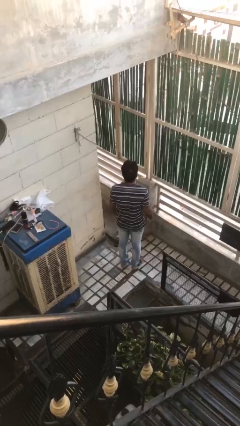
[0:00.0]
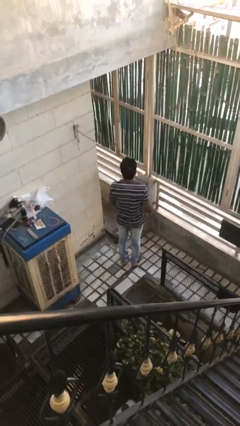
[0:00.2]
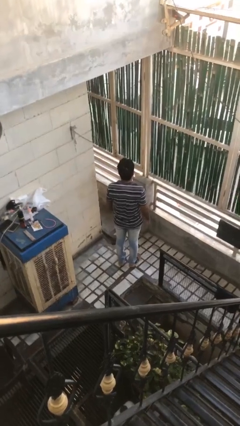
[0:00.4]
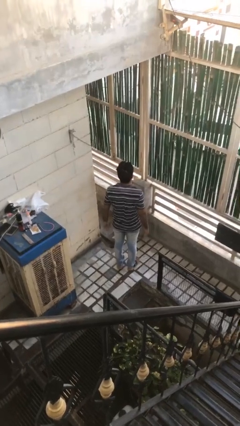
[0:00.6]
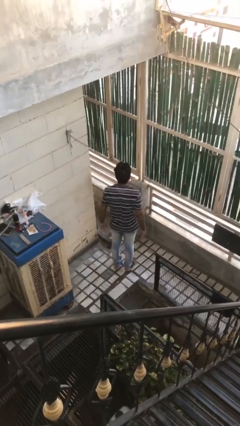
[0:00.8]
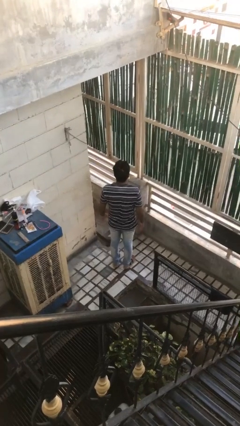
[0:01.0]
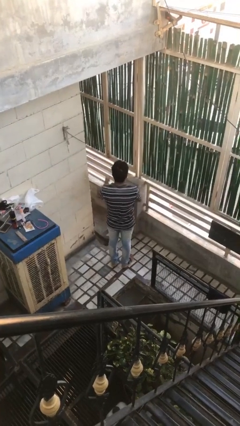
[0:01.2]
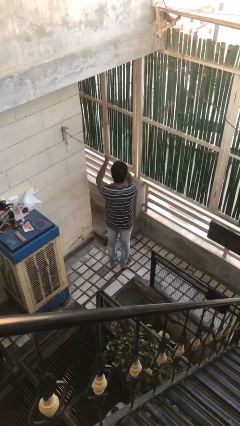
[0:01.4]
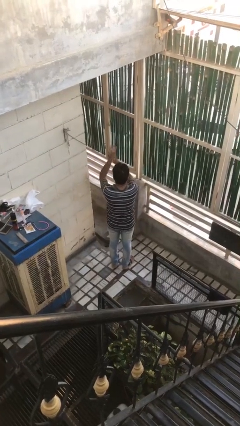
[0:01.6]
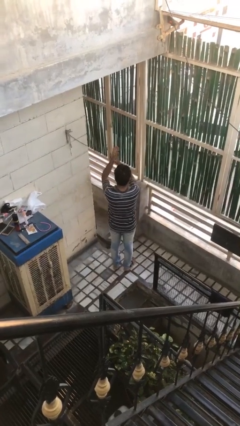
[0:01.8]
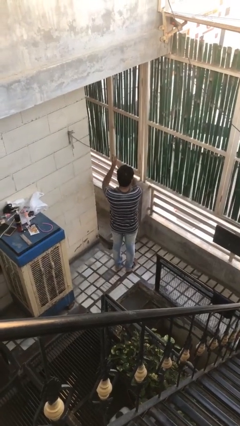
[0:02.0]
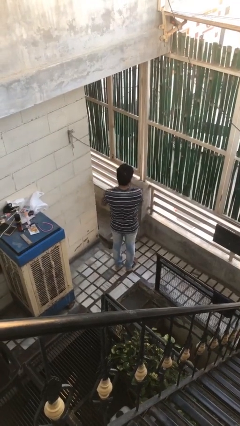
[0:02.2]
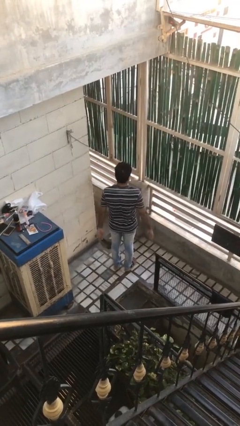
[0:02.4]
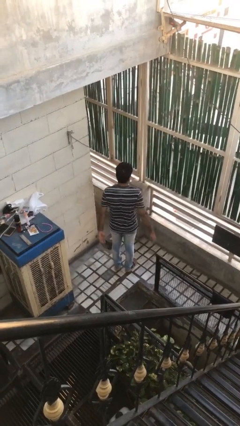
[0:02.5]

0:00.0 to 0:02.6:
person claps hands

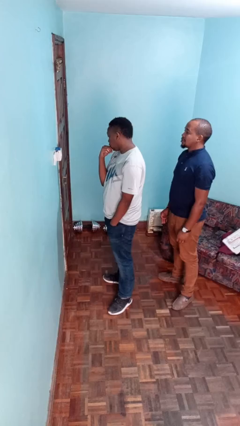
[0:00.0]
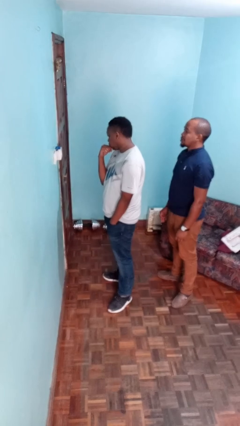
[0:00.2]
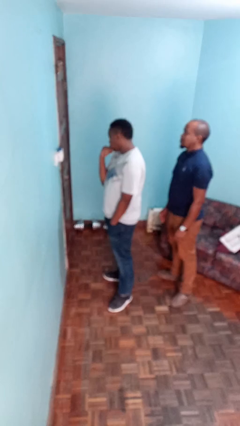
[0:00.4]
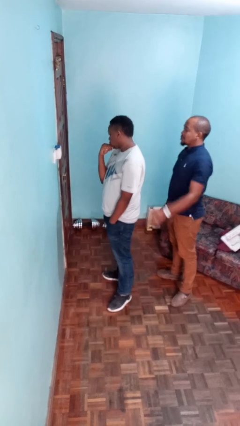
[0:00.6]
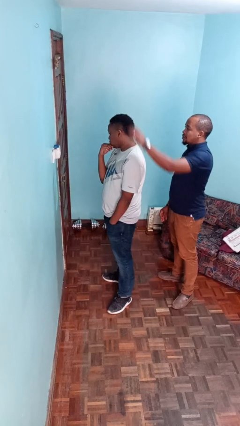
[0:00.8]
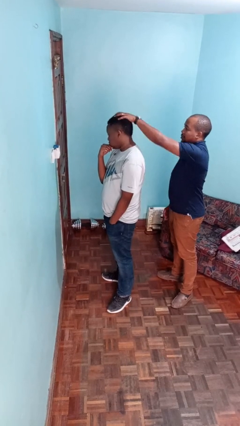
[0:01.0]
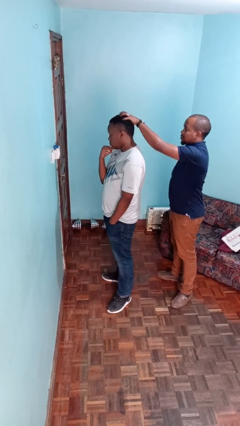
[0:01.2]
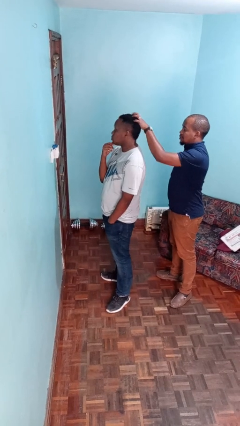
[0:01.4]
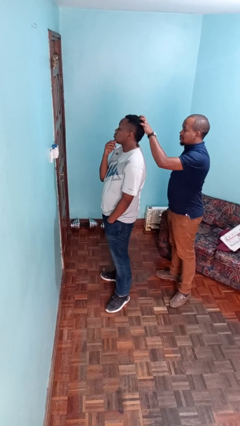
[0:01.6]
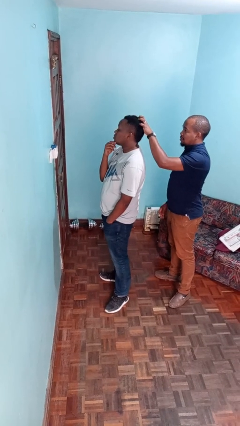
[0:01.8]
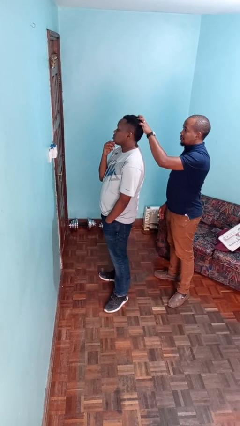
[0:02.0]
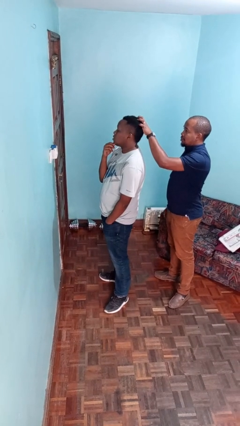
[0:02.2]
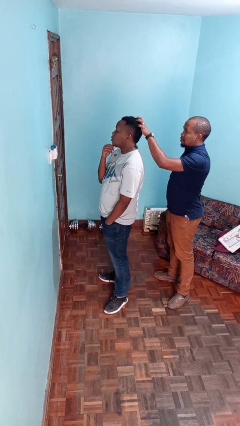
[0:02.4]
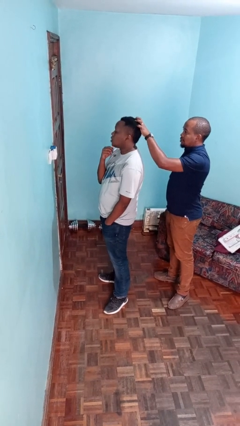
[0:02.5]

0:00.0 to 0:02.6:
person grabs person by hair

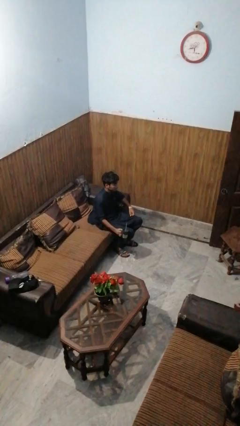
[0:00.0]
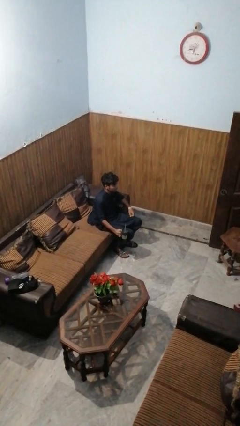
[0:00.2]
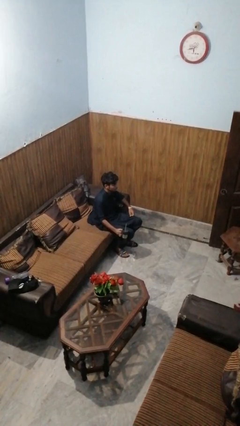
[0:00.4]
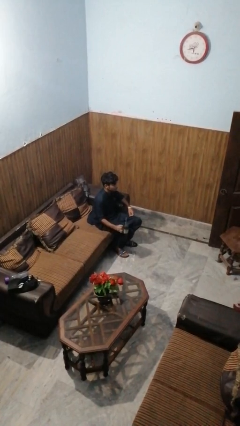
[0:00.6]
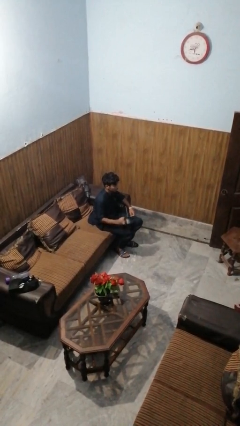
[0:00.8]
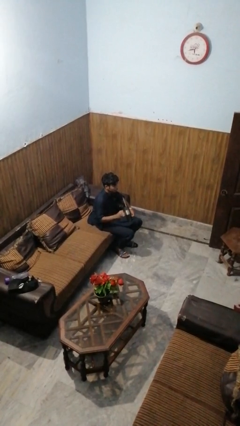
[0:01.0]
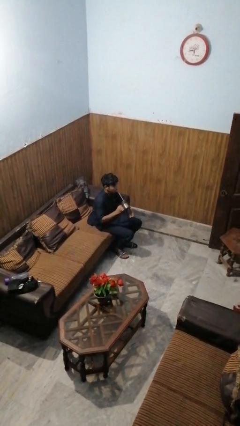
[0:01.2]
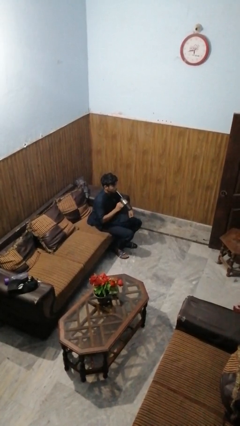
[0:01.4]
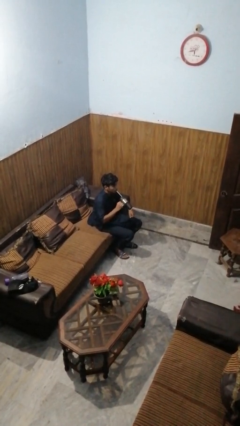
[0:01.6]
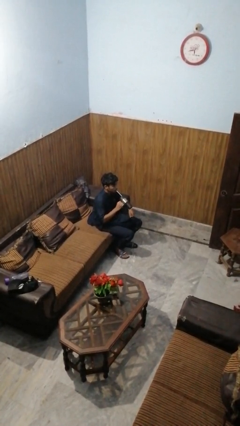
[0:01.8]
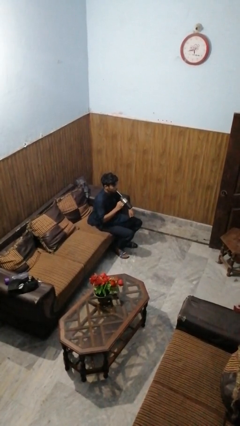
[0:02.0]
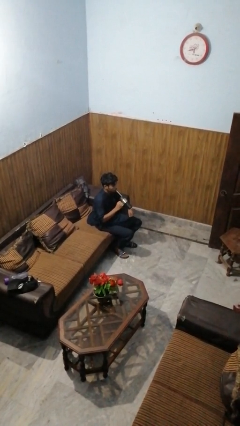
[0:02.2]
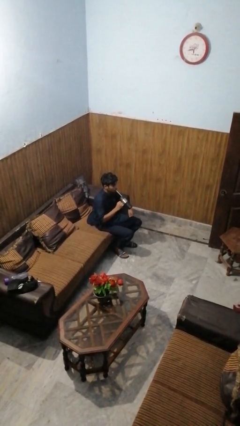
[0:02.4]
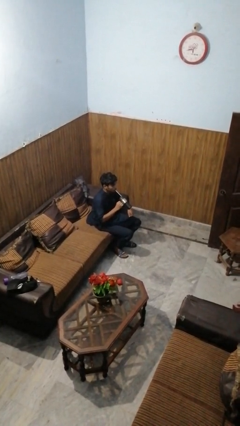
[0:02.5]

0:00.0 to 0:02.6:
person drinks from straw

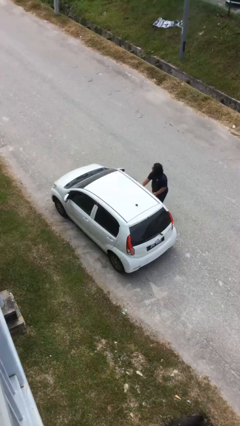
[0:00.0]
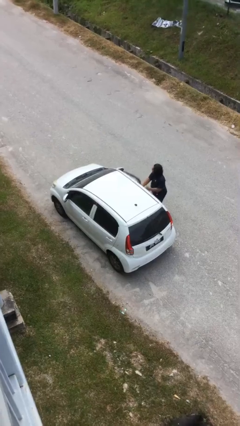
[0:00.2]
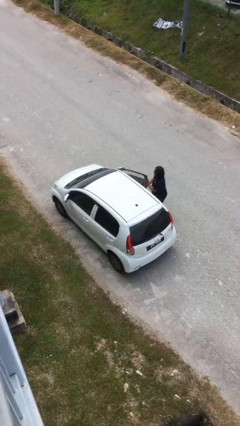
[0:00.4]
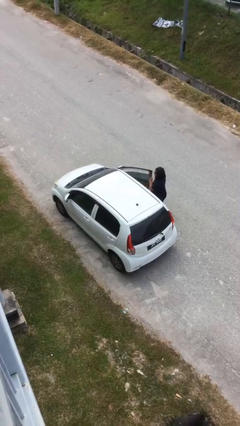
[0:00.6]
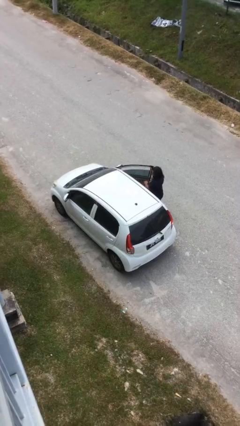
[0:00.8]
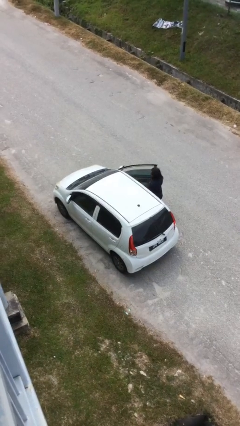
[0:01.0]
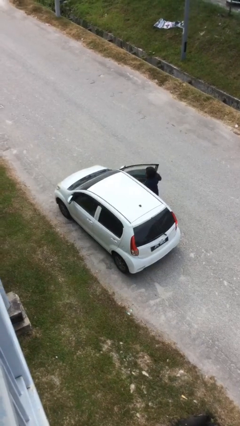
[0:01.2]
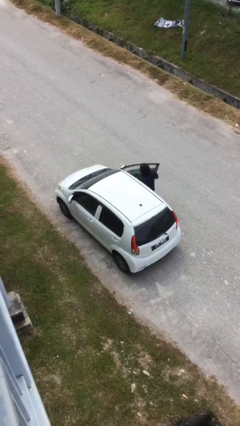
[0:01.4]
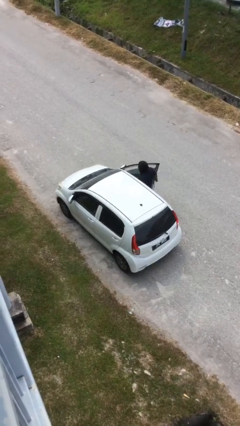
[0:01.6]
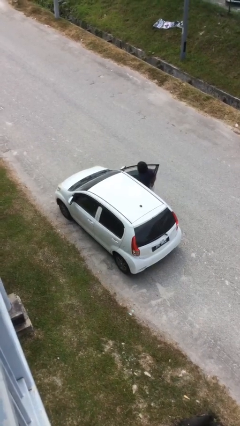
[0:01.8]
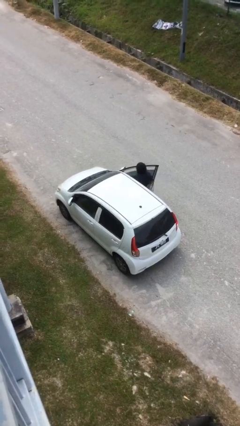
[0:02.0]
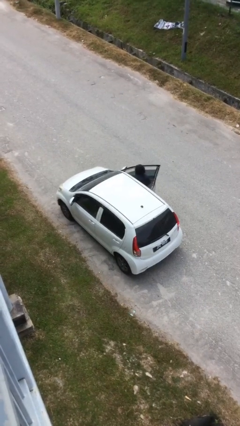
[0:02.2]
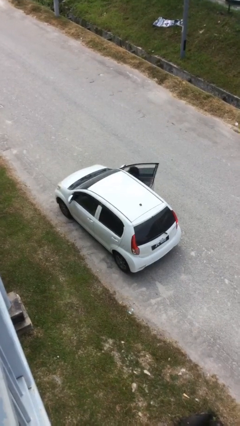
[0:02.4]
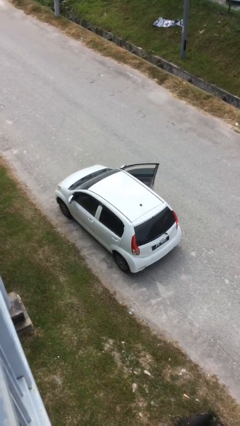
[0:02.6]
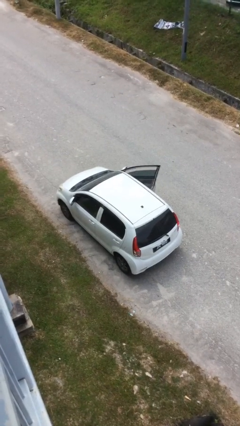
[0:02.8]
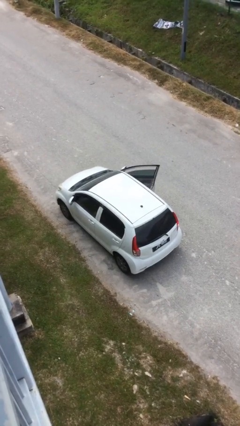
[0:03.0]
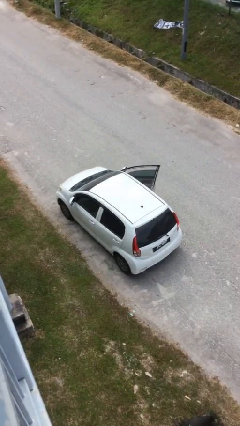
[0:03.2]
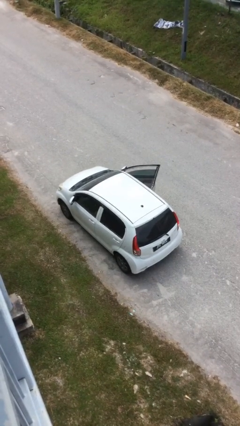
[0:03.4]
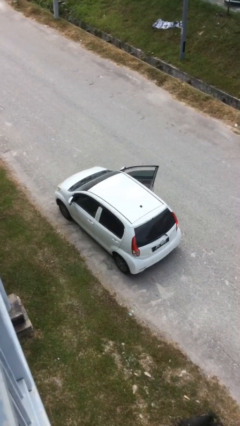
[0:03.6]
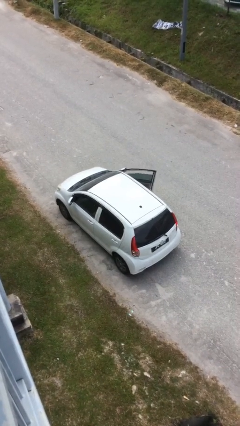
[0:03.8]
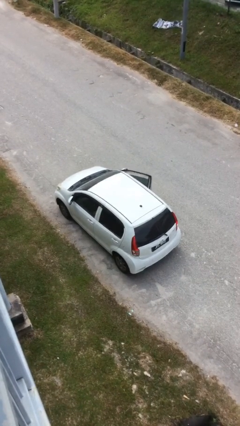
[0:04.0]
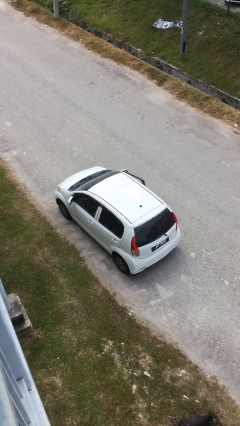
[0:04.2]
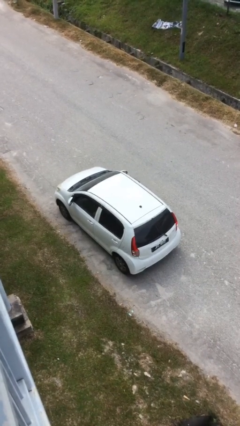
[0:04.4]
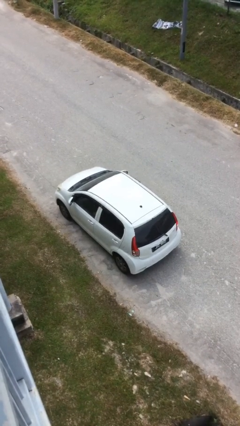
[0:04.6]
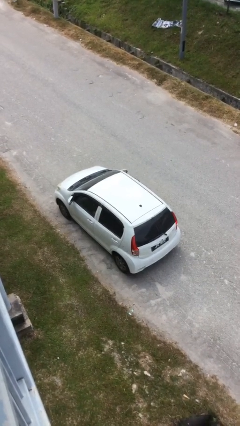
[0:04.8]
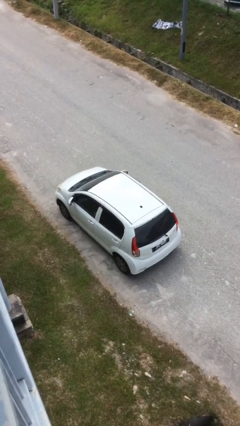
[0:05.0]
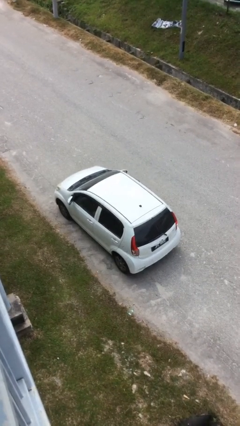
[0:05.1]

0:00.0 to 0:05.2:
car picks up person

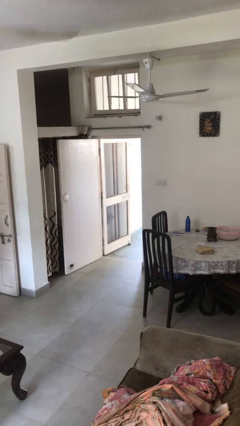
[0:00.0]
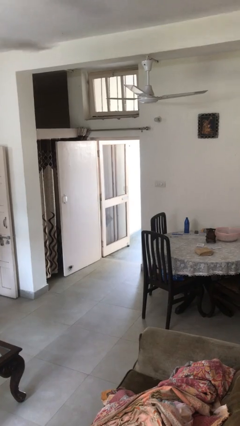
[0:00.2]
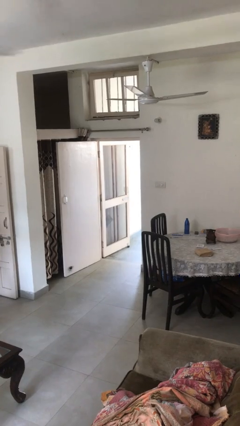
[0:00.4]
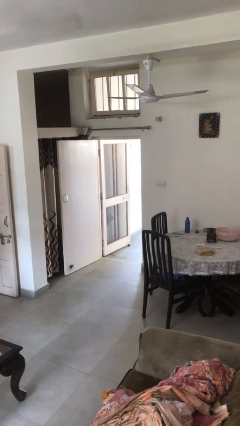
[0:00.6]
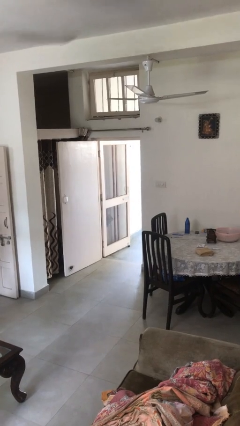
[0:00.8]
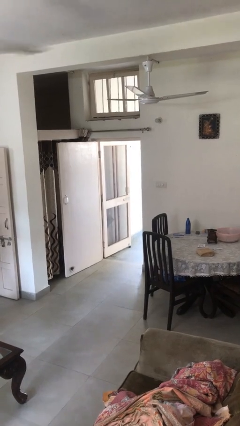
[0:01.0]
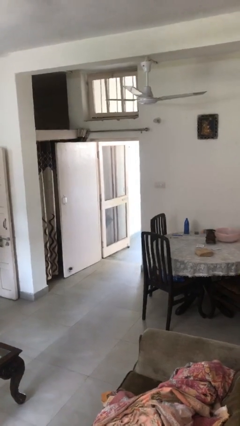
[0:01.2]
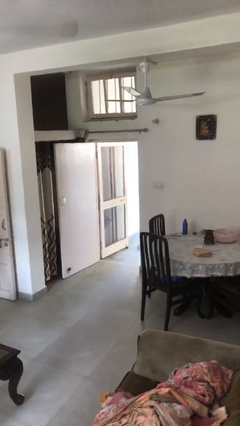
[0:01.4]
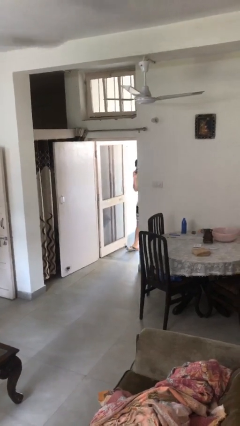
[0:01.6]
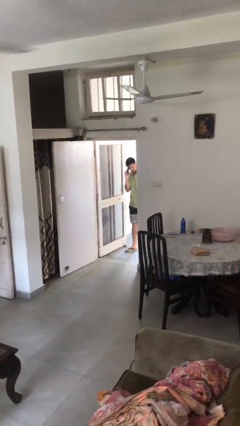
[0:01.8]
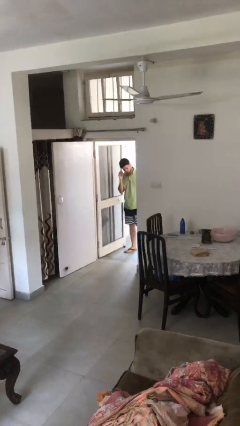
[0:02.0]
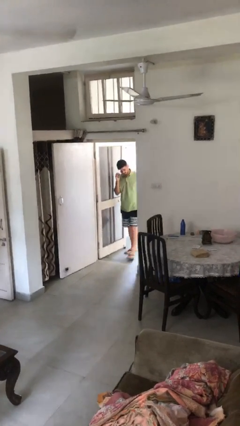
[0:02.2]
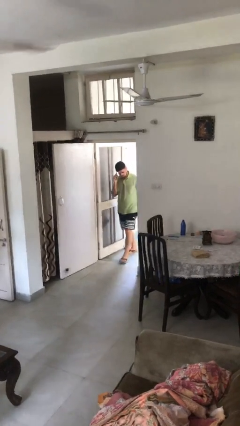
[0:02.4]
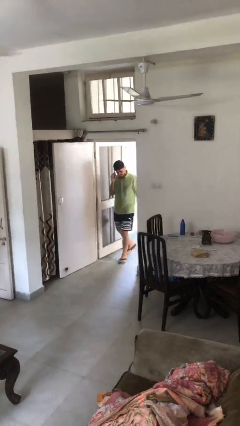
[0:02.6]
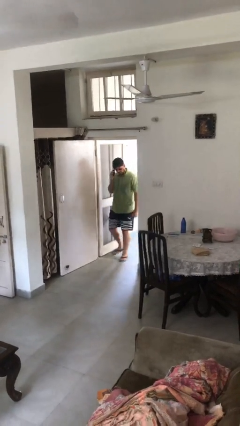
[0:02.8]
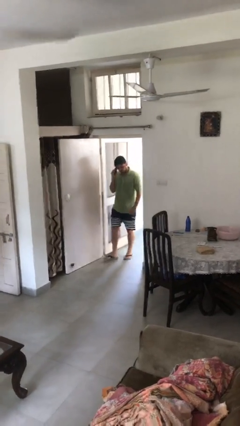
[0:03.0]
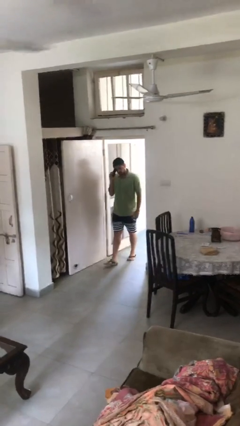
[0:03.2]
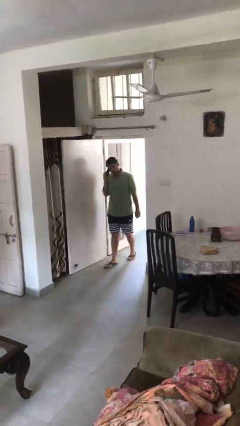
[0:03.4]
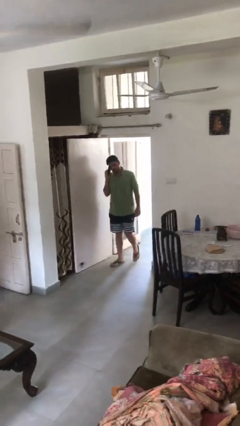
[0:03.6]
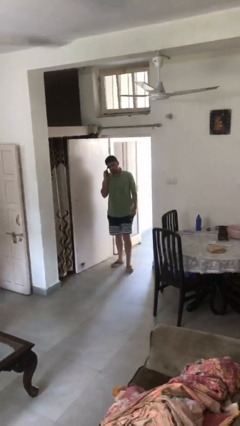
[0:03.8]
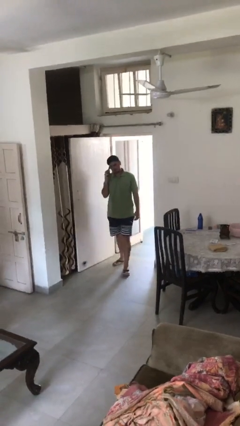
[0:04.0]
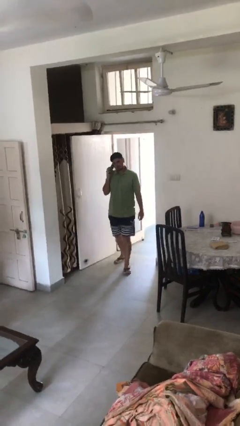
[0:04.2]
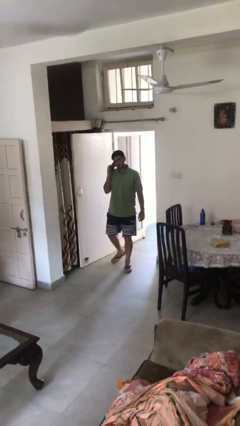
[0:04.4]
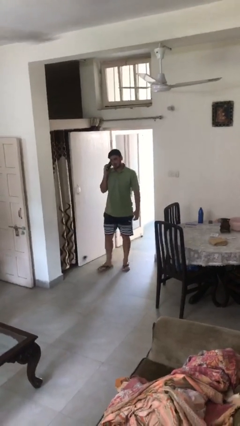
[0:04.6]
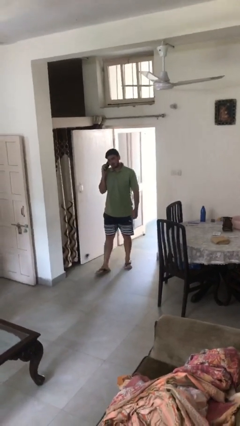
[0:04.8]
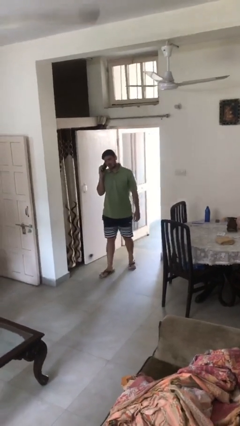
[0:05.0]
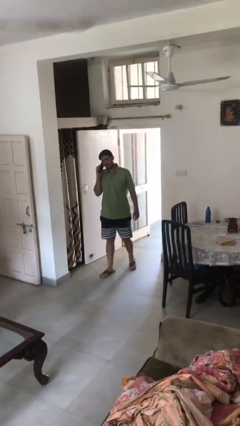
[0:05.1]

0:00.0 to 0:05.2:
person enters scene through structure
